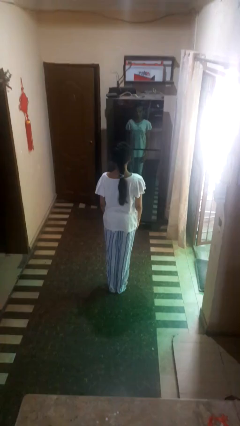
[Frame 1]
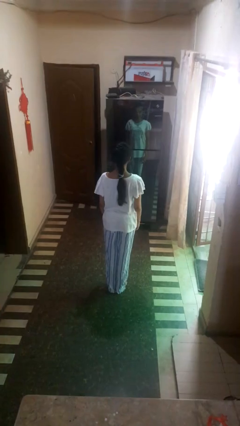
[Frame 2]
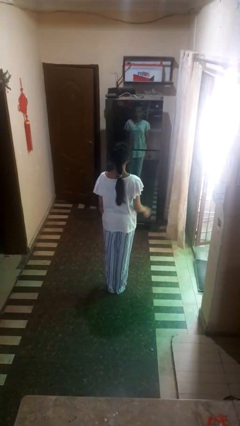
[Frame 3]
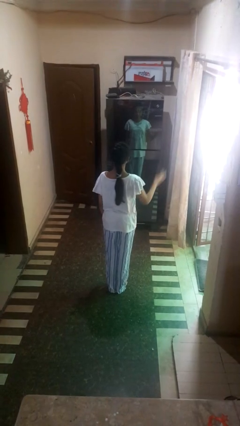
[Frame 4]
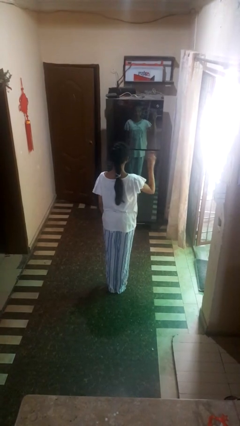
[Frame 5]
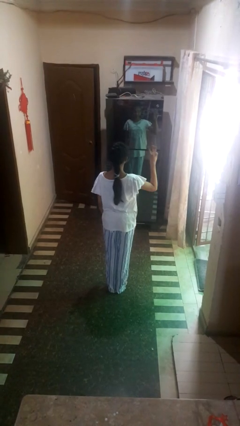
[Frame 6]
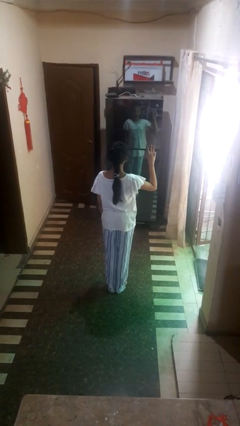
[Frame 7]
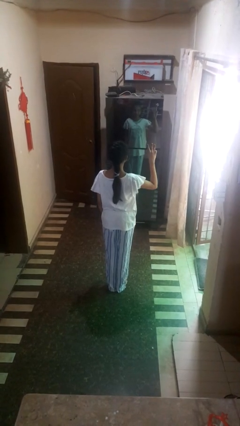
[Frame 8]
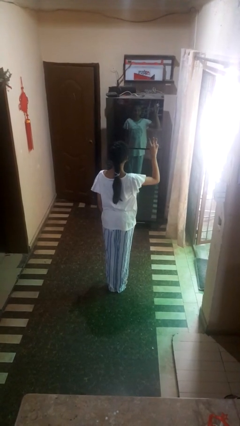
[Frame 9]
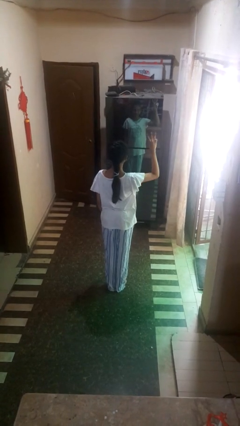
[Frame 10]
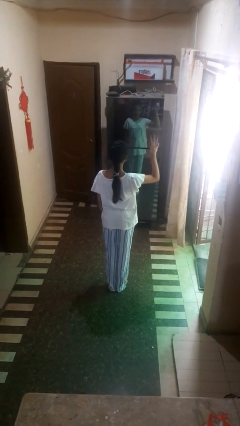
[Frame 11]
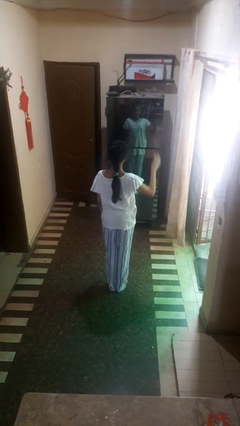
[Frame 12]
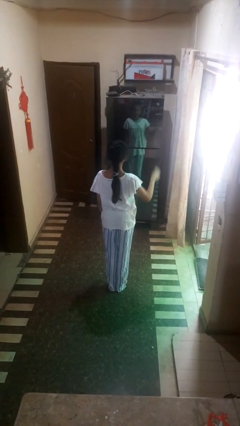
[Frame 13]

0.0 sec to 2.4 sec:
person gestures number three

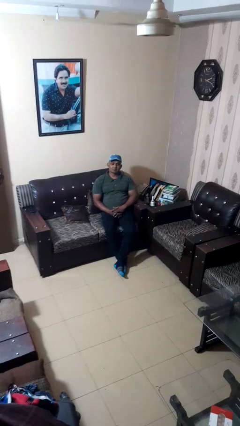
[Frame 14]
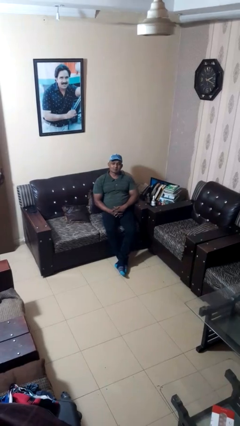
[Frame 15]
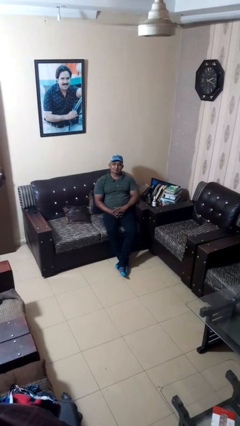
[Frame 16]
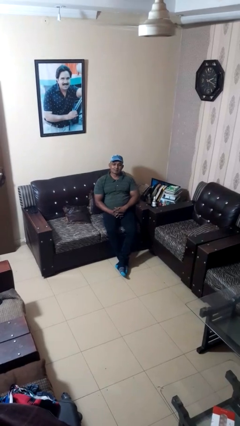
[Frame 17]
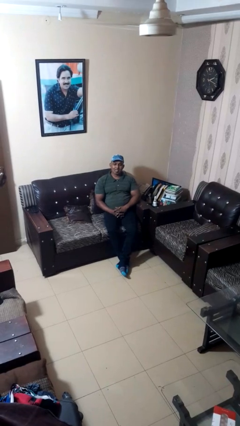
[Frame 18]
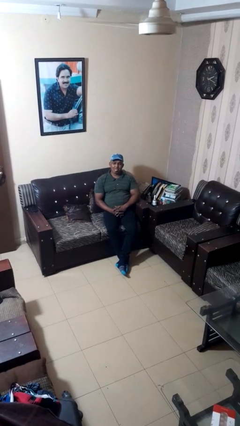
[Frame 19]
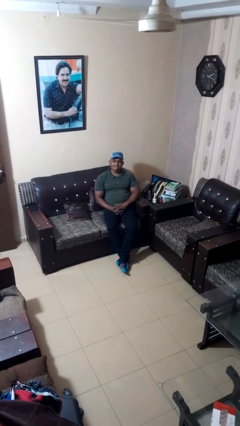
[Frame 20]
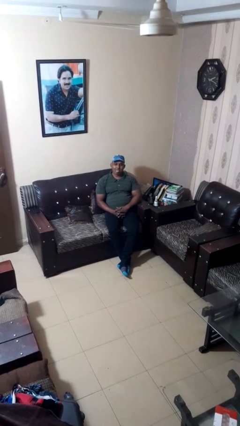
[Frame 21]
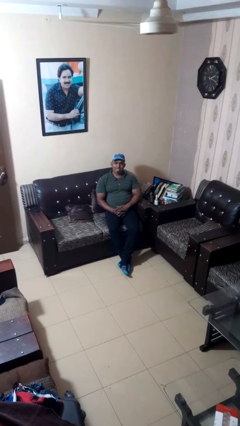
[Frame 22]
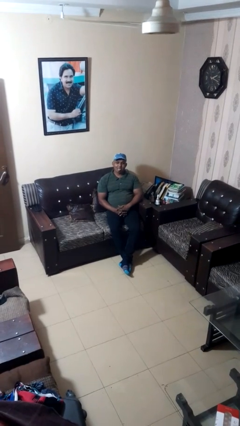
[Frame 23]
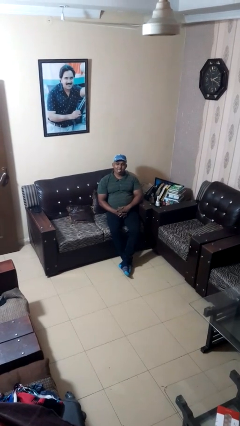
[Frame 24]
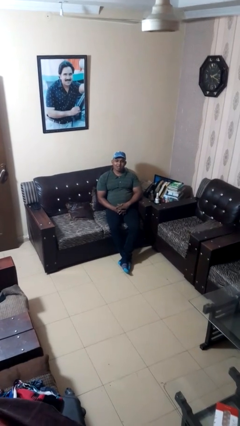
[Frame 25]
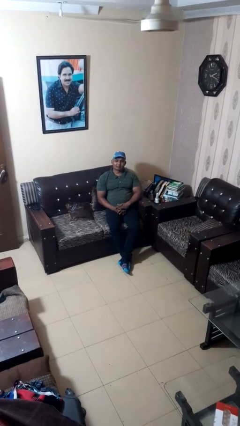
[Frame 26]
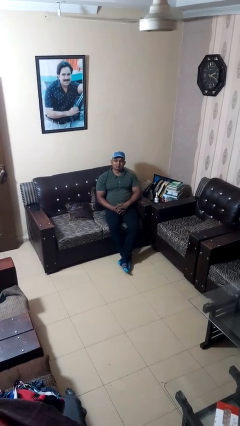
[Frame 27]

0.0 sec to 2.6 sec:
person sticks out tongue

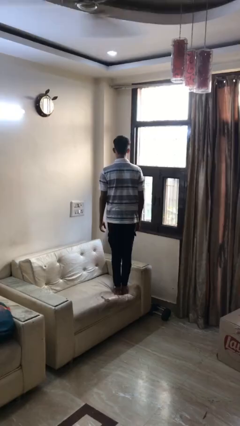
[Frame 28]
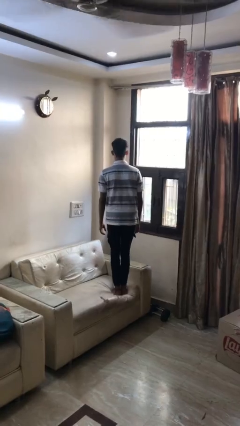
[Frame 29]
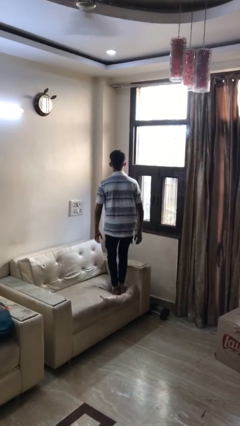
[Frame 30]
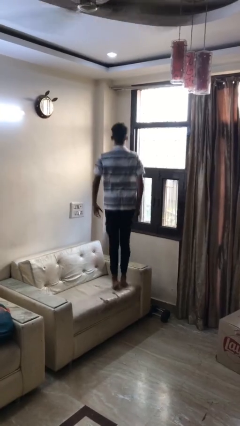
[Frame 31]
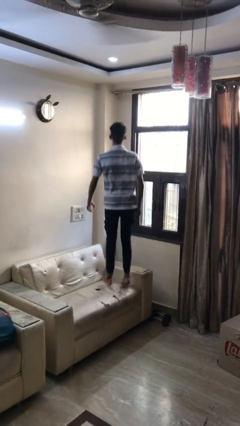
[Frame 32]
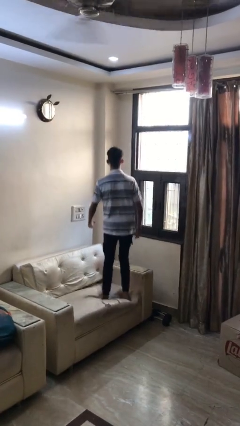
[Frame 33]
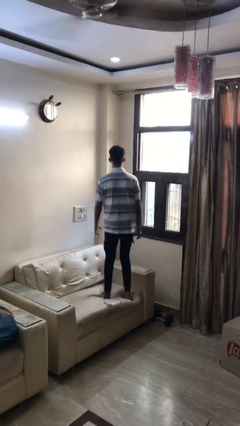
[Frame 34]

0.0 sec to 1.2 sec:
person jumps on couch

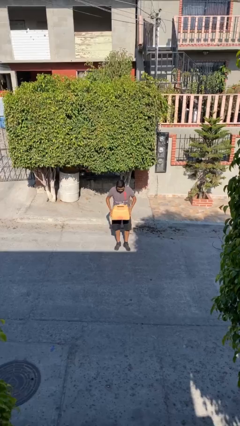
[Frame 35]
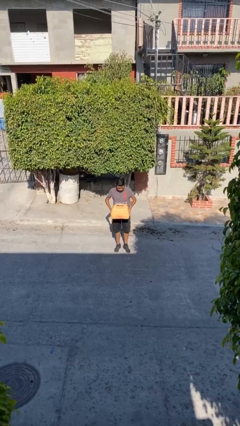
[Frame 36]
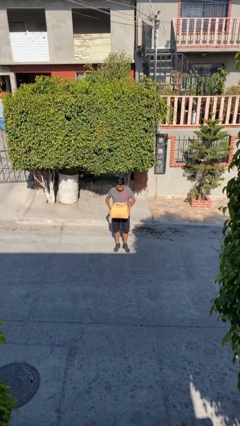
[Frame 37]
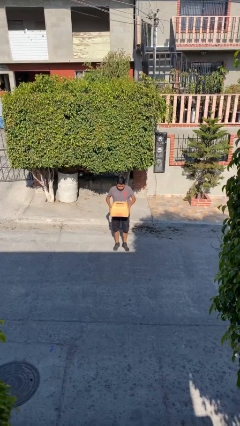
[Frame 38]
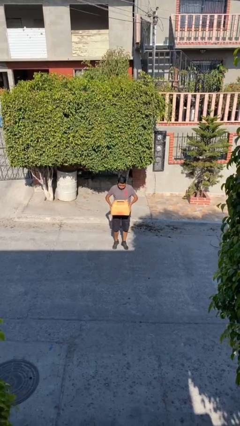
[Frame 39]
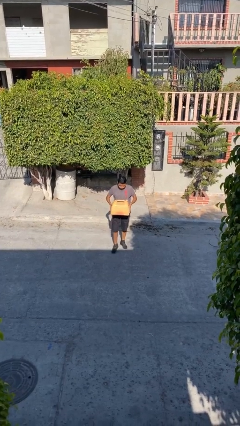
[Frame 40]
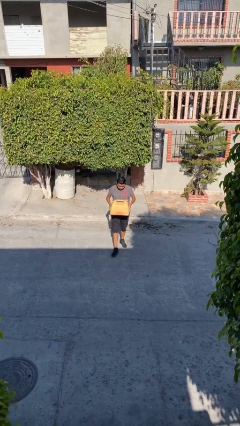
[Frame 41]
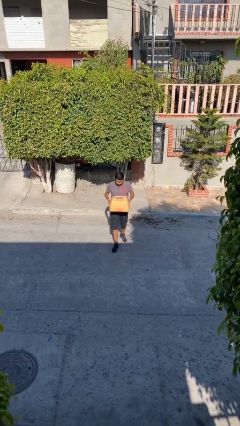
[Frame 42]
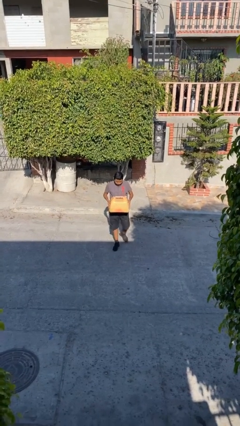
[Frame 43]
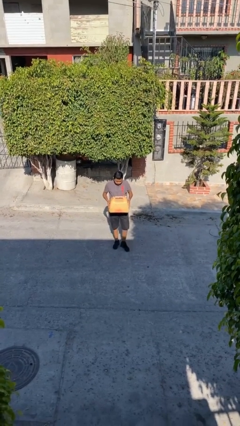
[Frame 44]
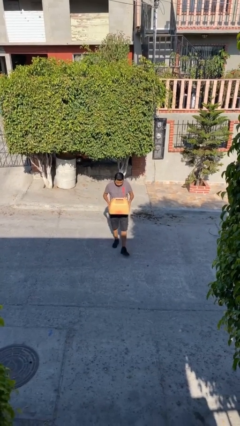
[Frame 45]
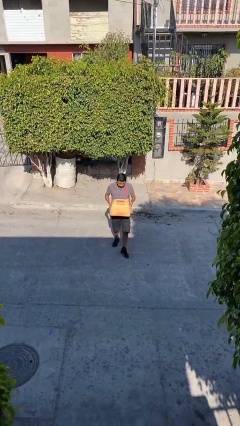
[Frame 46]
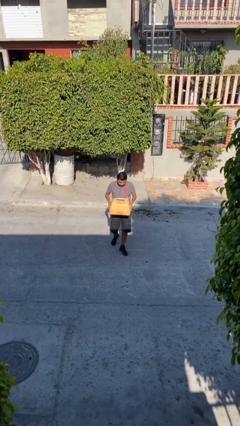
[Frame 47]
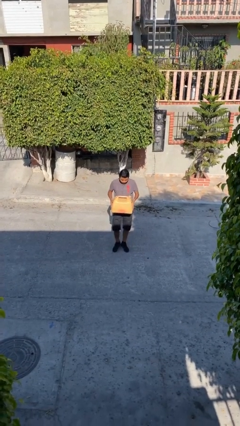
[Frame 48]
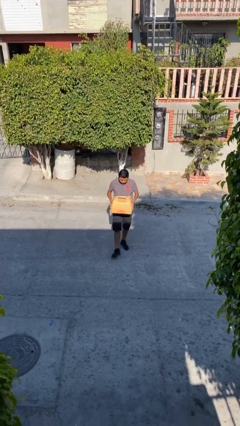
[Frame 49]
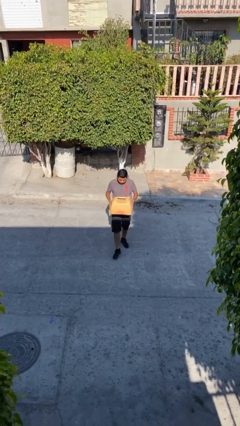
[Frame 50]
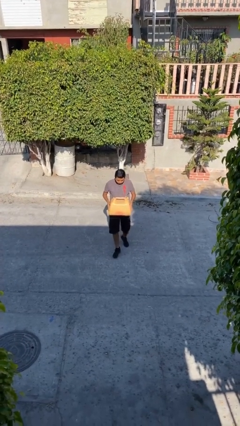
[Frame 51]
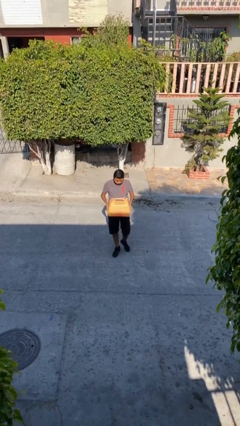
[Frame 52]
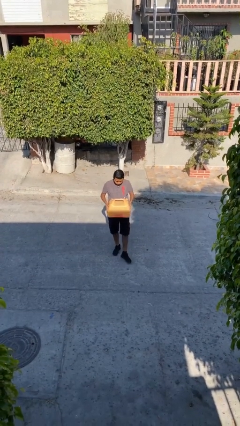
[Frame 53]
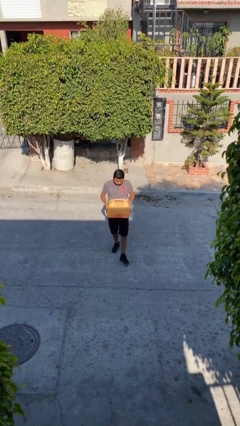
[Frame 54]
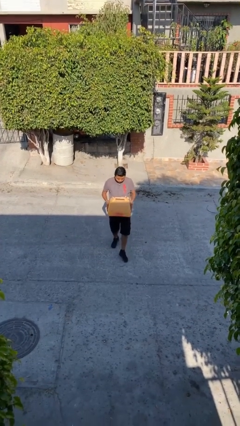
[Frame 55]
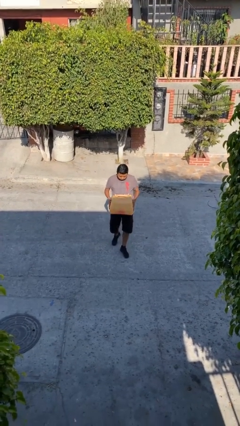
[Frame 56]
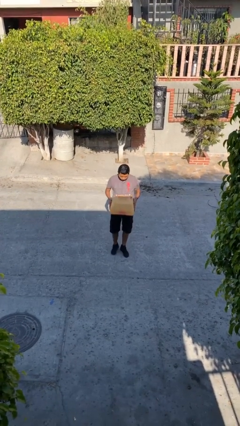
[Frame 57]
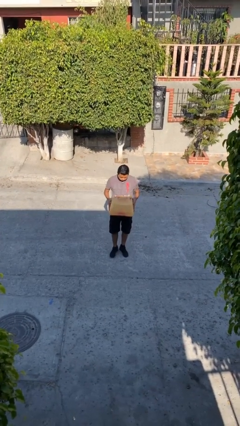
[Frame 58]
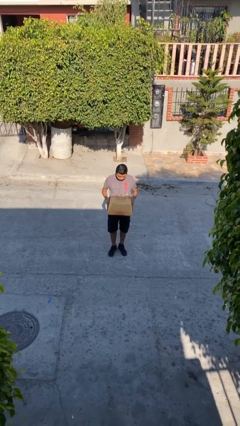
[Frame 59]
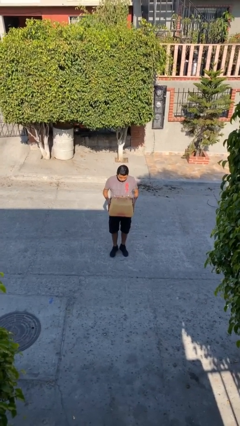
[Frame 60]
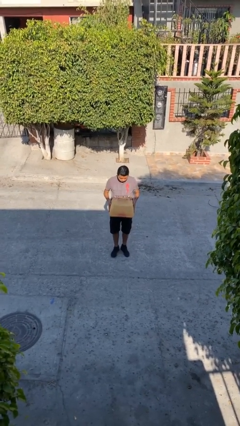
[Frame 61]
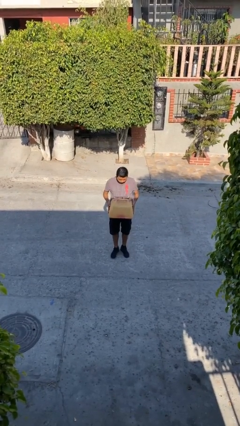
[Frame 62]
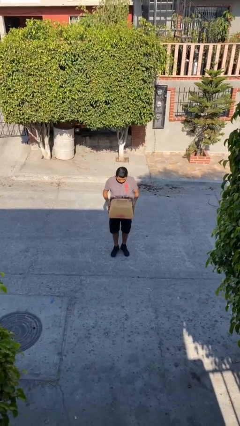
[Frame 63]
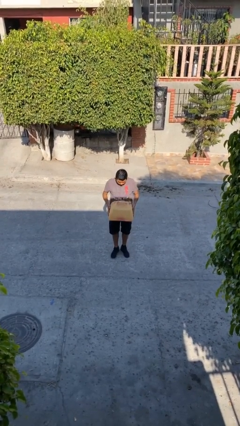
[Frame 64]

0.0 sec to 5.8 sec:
person carries heavy object

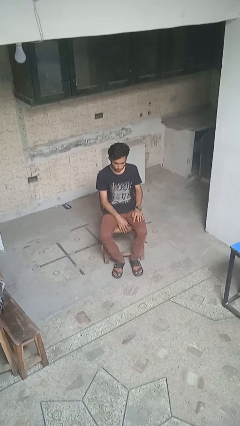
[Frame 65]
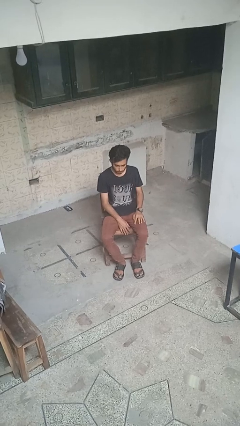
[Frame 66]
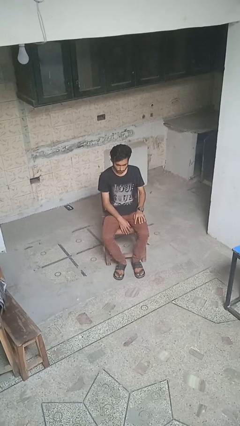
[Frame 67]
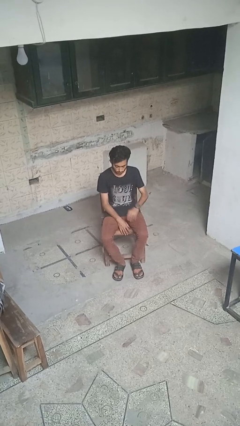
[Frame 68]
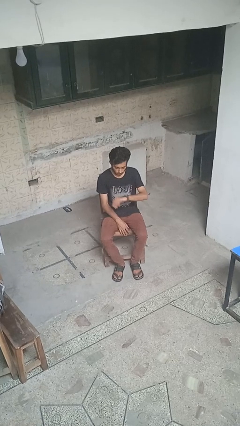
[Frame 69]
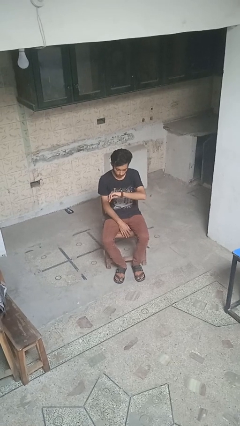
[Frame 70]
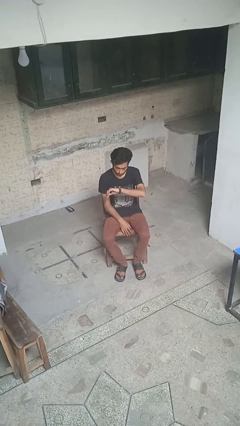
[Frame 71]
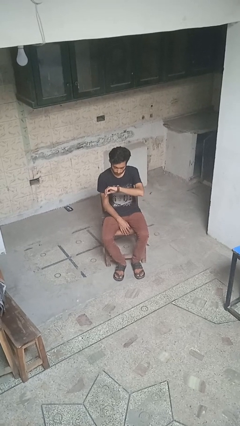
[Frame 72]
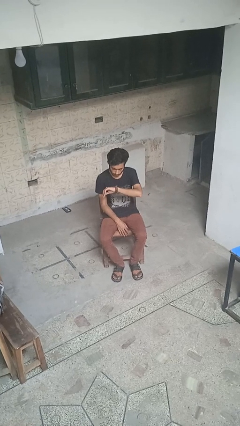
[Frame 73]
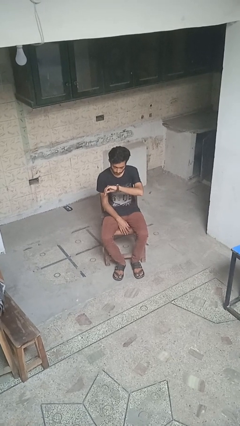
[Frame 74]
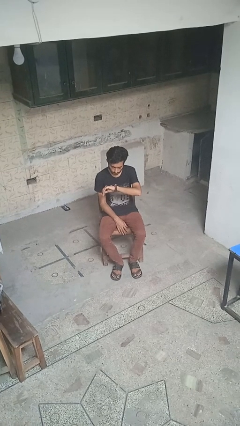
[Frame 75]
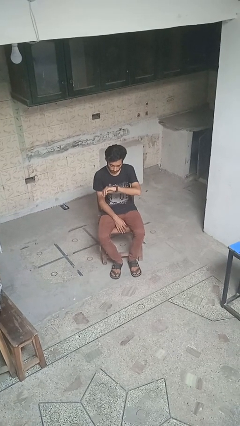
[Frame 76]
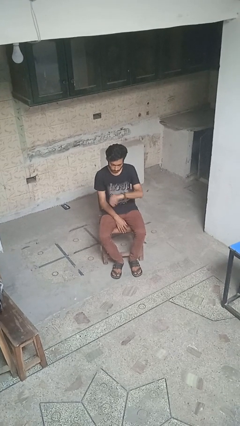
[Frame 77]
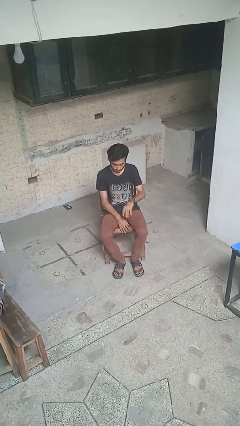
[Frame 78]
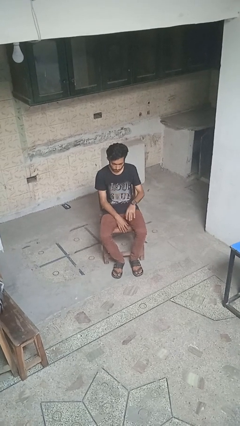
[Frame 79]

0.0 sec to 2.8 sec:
person looks at wristwatch

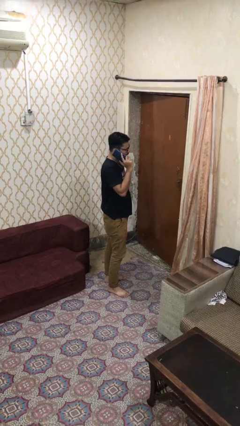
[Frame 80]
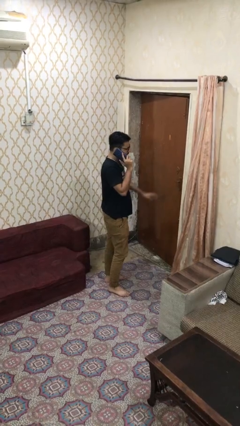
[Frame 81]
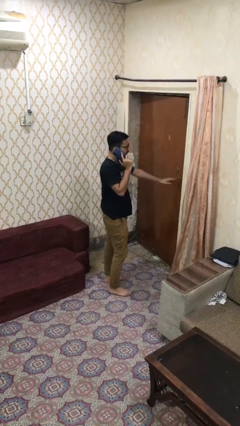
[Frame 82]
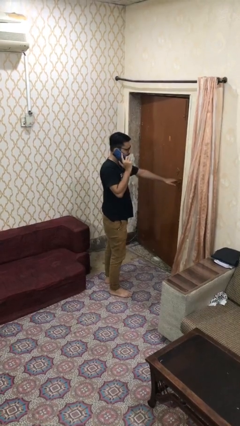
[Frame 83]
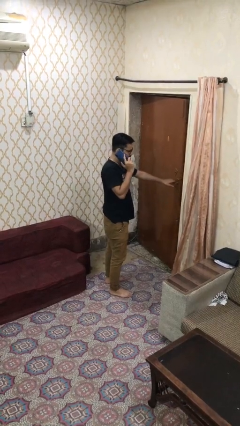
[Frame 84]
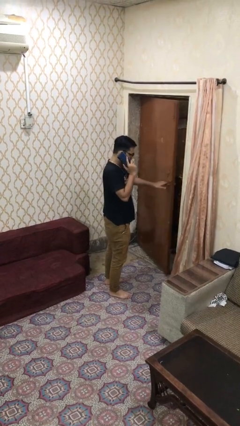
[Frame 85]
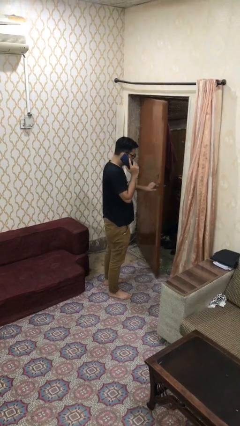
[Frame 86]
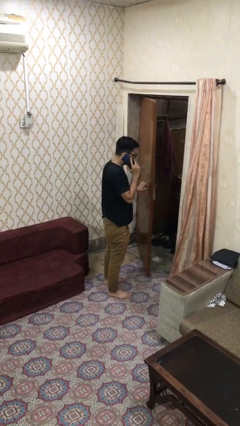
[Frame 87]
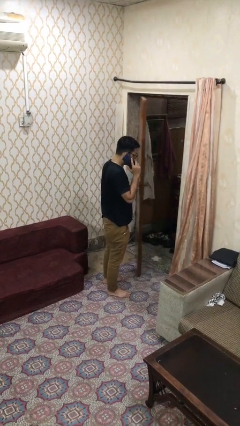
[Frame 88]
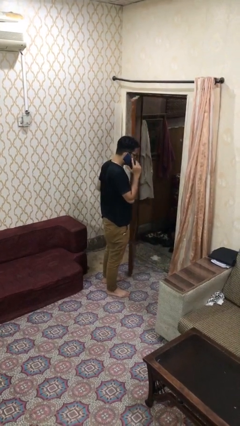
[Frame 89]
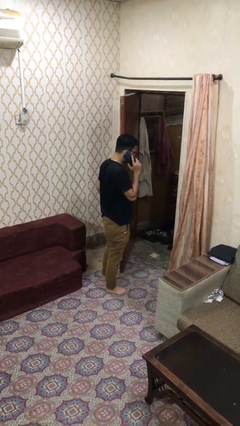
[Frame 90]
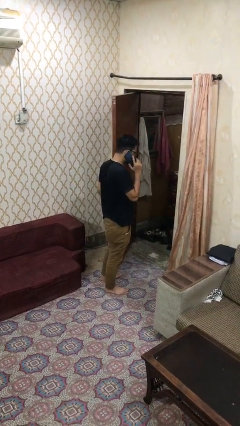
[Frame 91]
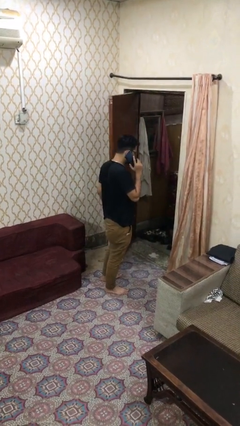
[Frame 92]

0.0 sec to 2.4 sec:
person opens facility door
